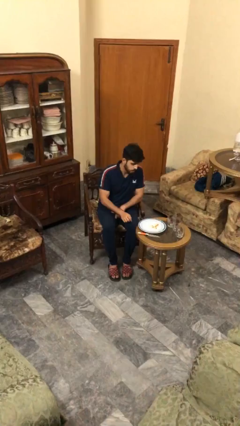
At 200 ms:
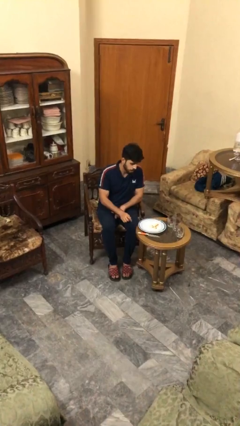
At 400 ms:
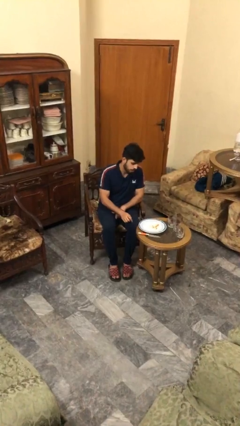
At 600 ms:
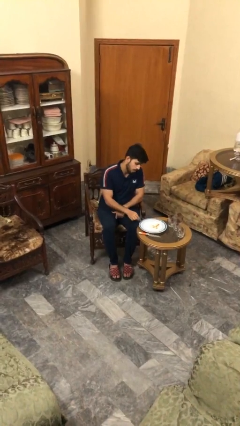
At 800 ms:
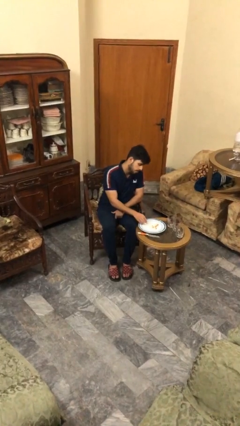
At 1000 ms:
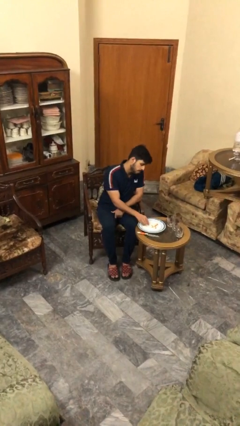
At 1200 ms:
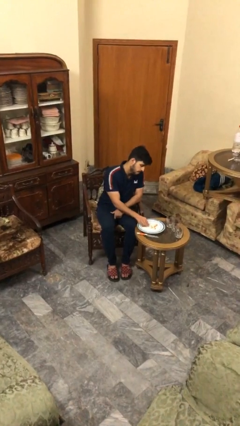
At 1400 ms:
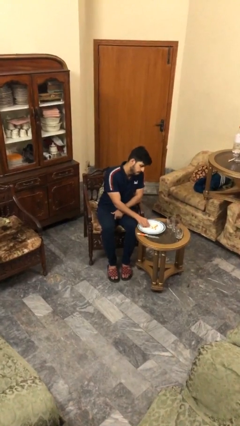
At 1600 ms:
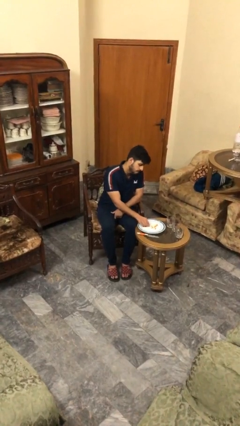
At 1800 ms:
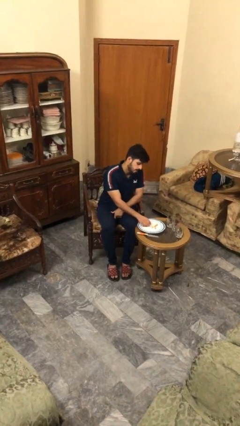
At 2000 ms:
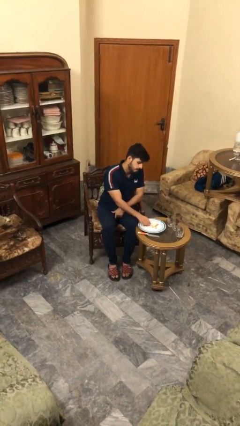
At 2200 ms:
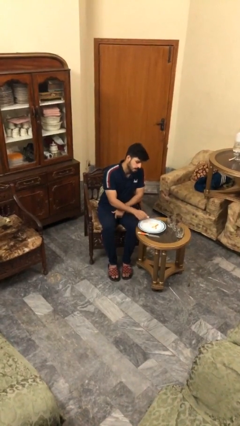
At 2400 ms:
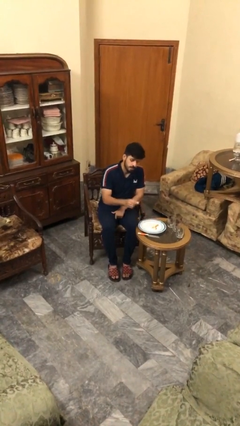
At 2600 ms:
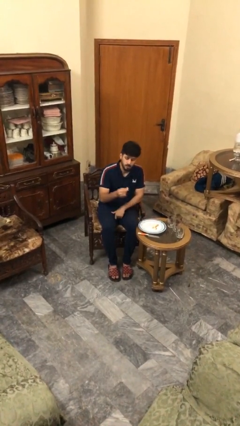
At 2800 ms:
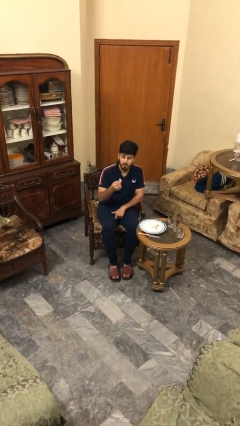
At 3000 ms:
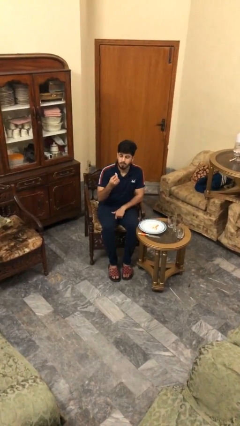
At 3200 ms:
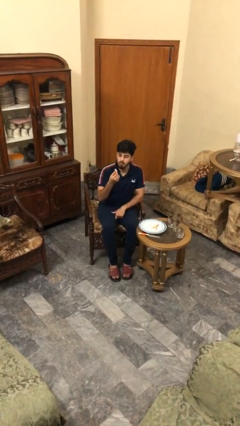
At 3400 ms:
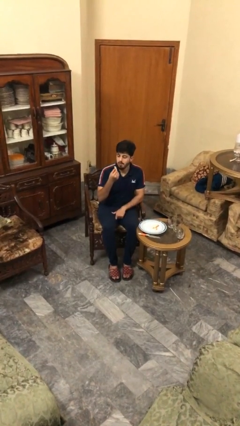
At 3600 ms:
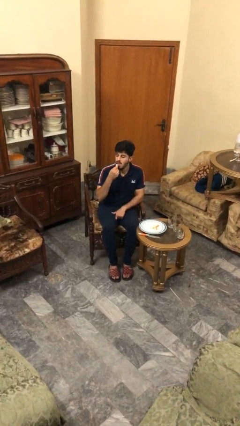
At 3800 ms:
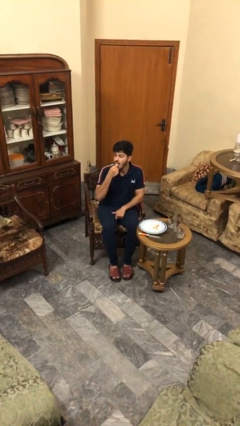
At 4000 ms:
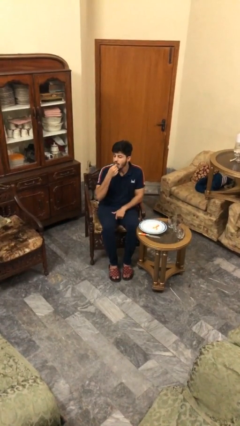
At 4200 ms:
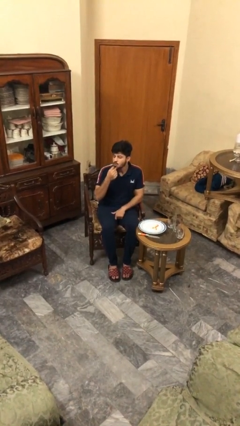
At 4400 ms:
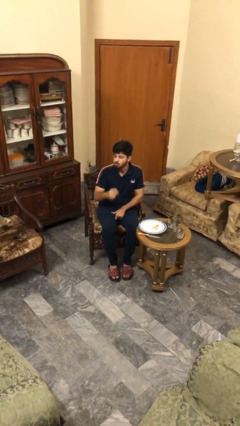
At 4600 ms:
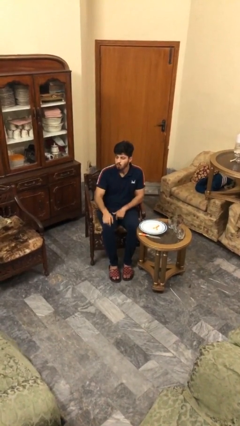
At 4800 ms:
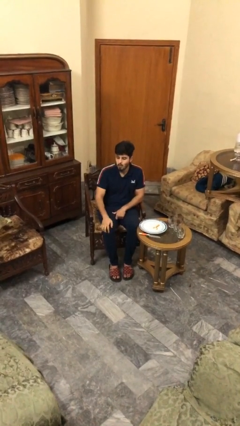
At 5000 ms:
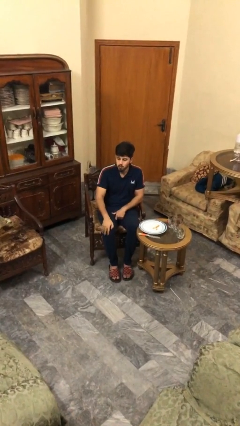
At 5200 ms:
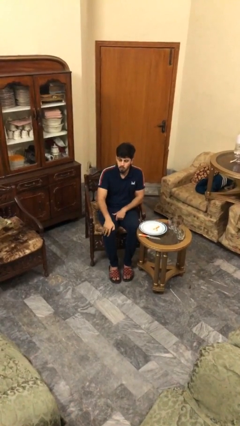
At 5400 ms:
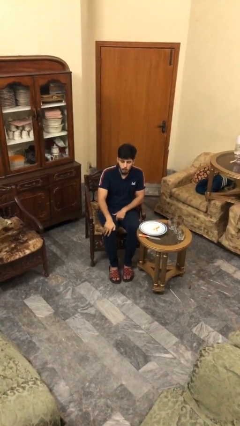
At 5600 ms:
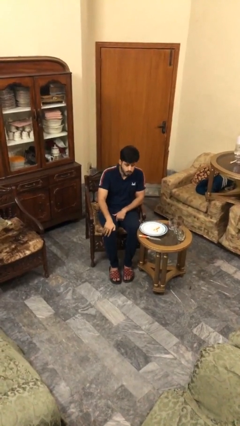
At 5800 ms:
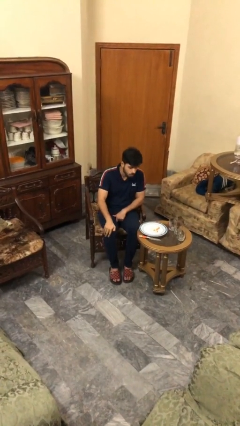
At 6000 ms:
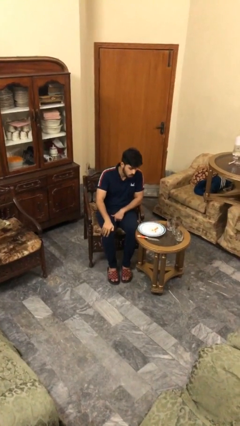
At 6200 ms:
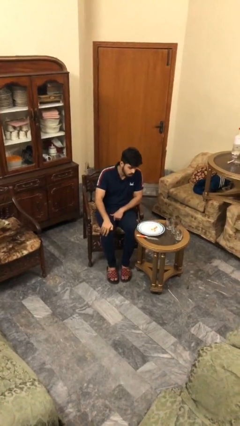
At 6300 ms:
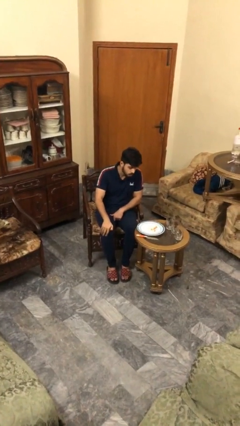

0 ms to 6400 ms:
person eats with hands

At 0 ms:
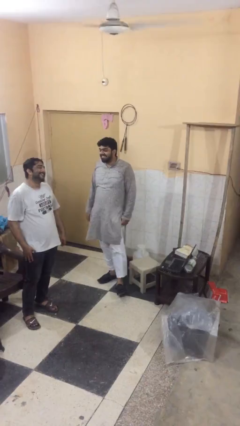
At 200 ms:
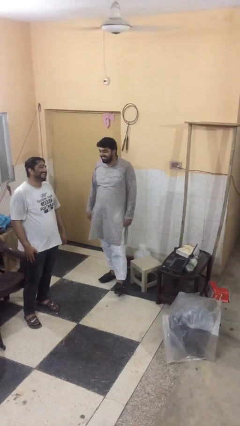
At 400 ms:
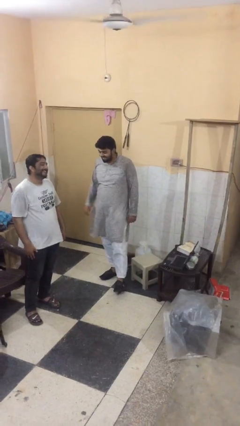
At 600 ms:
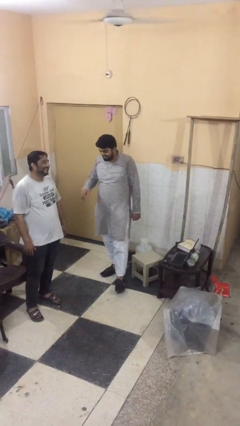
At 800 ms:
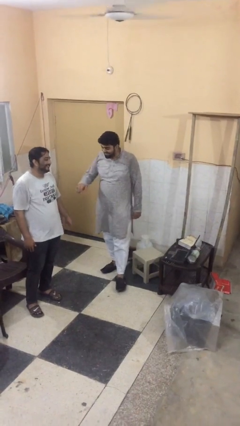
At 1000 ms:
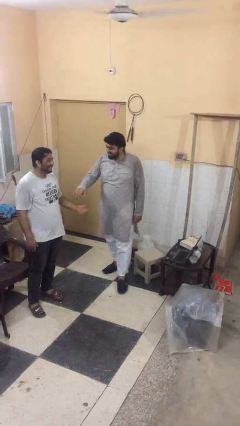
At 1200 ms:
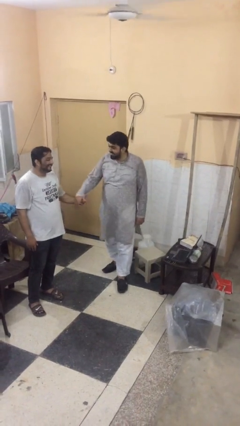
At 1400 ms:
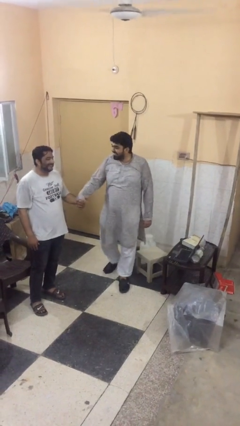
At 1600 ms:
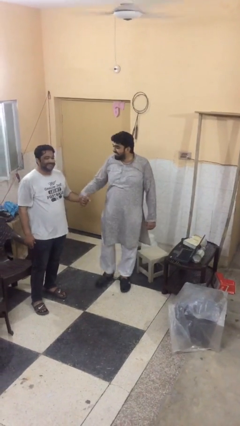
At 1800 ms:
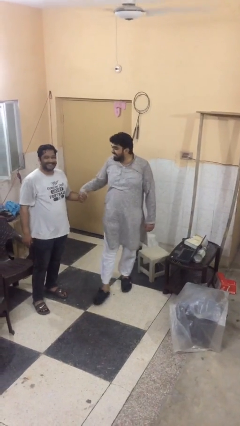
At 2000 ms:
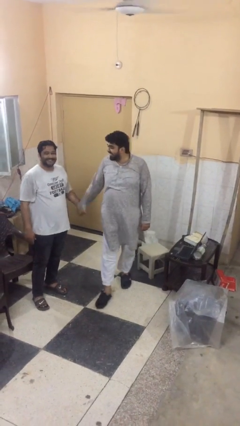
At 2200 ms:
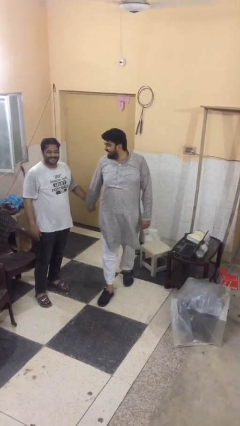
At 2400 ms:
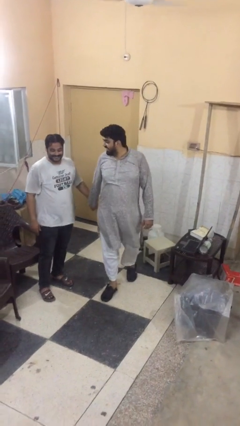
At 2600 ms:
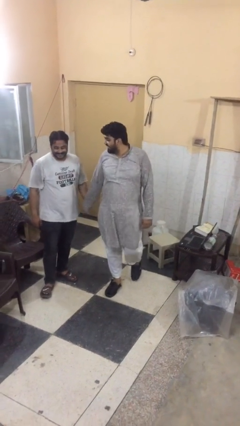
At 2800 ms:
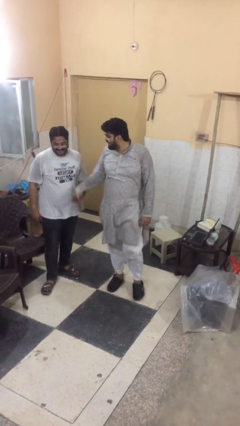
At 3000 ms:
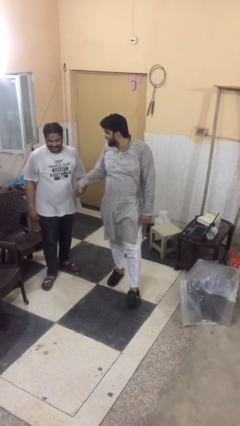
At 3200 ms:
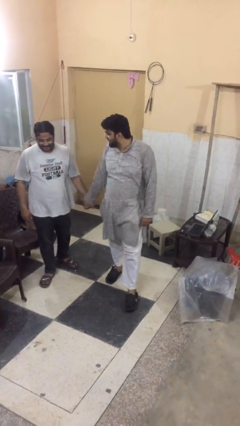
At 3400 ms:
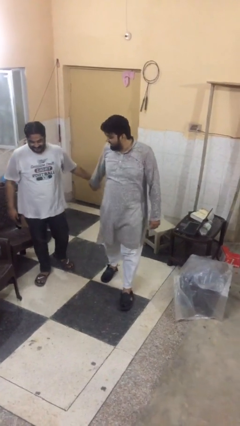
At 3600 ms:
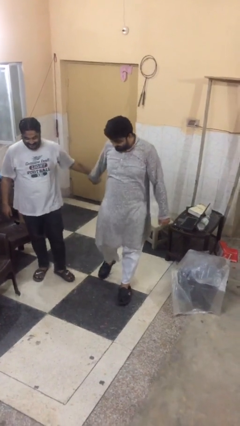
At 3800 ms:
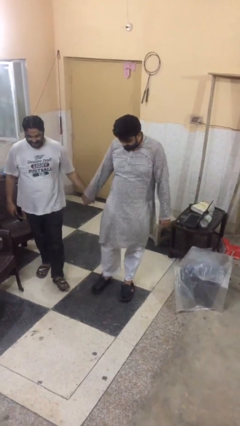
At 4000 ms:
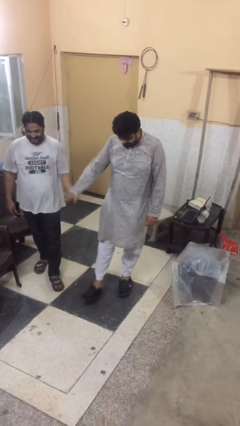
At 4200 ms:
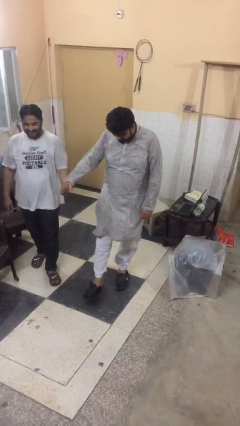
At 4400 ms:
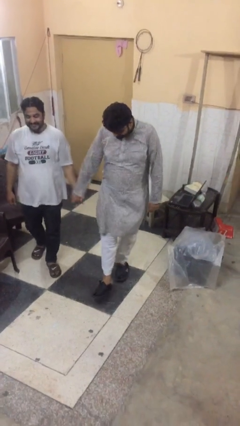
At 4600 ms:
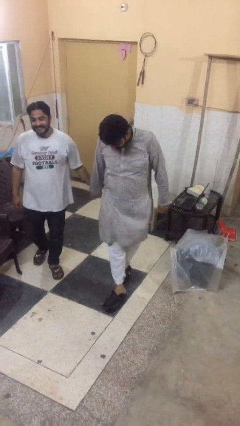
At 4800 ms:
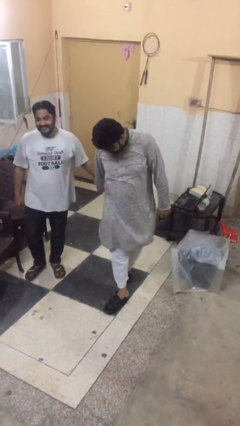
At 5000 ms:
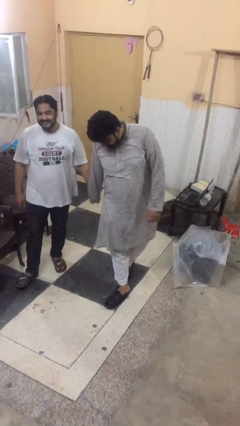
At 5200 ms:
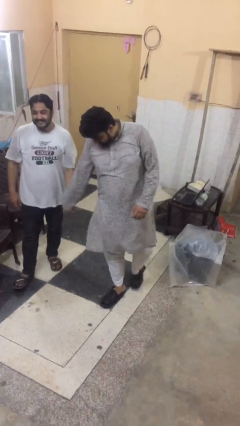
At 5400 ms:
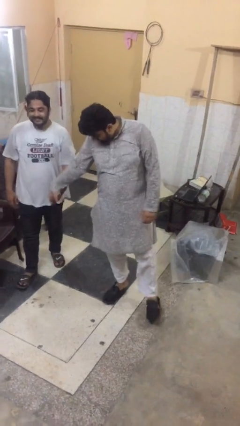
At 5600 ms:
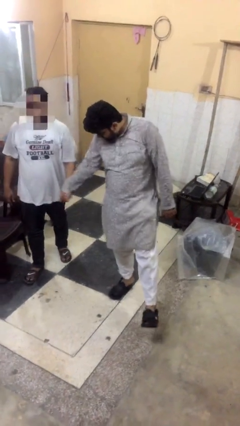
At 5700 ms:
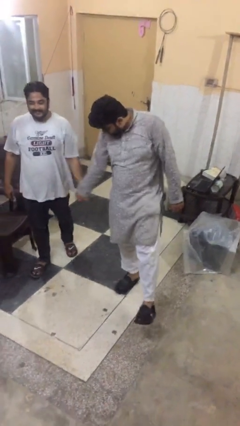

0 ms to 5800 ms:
person holds hand

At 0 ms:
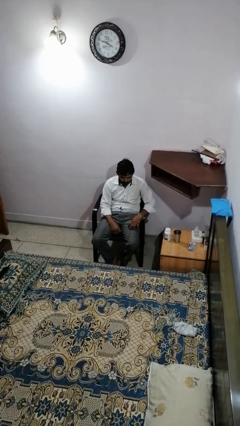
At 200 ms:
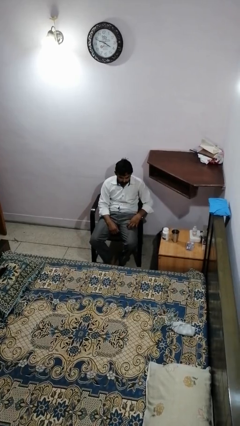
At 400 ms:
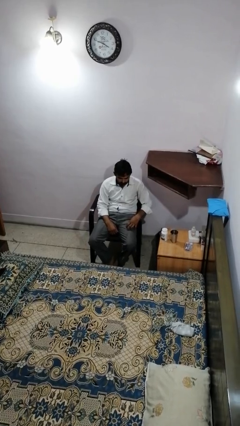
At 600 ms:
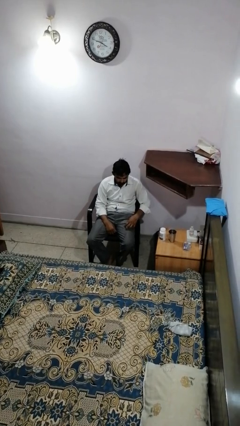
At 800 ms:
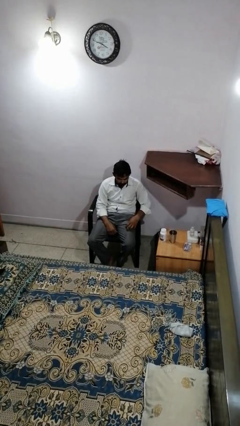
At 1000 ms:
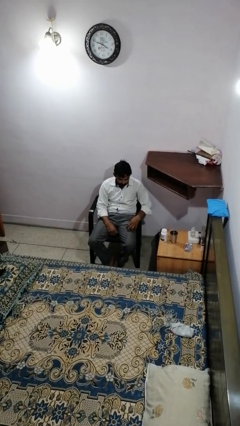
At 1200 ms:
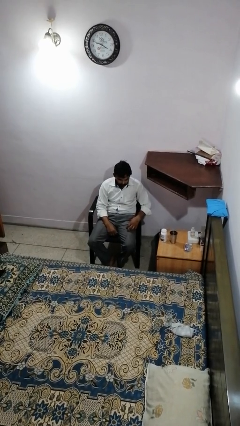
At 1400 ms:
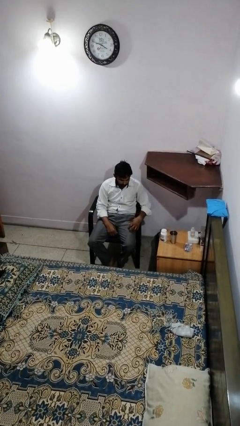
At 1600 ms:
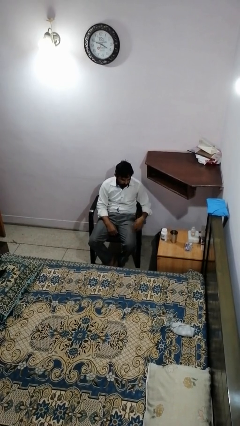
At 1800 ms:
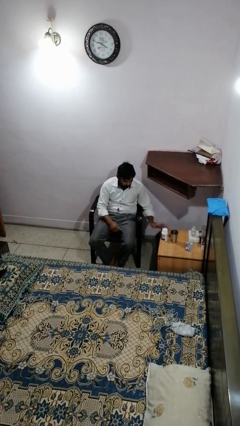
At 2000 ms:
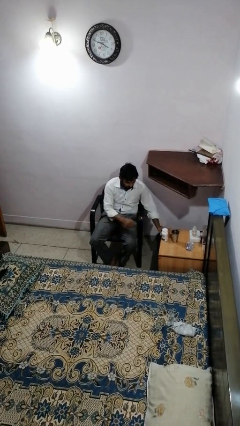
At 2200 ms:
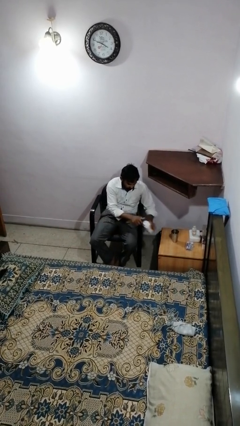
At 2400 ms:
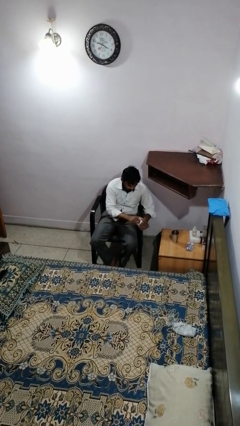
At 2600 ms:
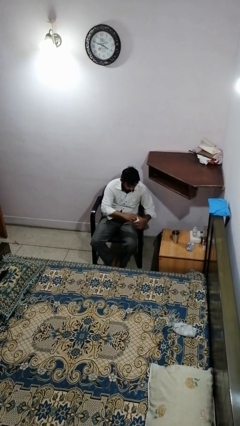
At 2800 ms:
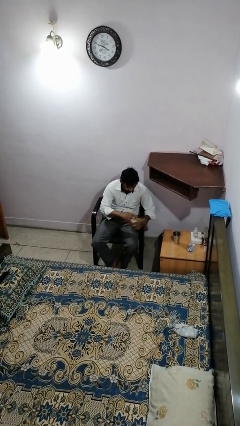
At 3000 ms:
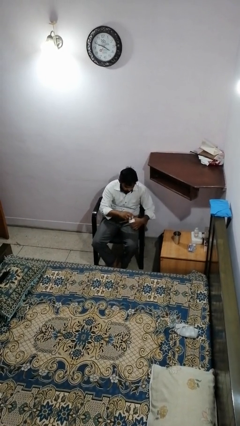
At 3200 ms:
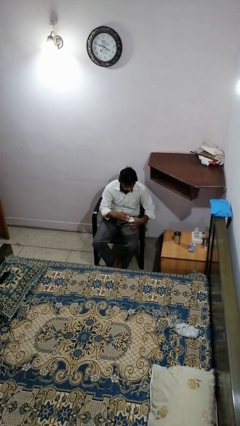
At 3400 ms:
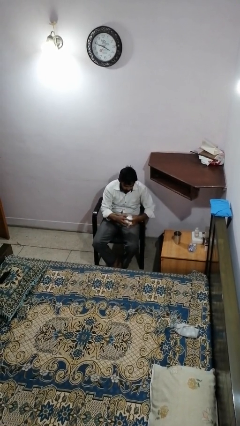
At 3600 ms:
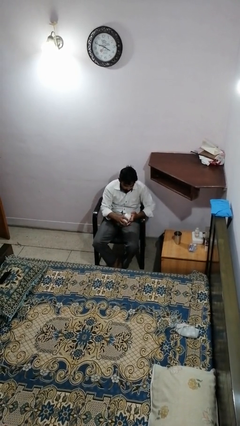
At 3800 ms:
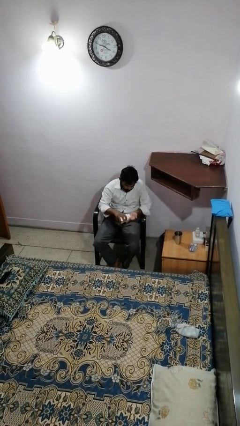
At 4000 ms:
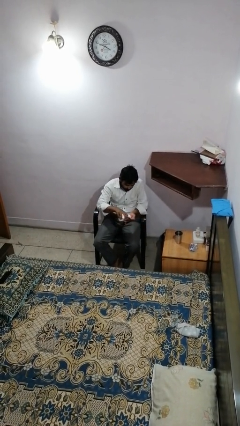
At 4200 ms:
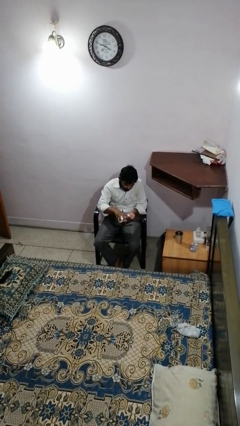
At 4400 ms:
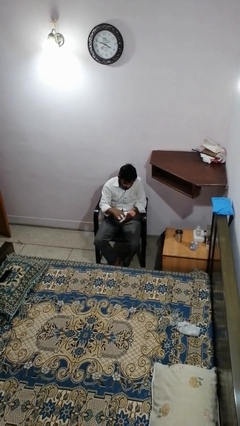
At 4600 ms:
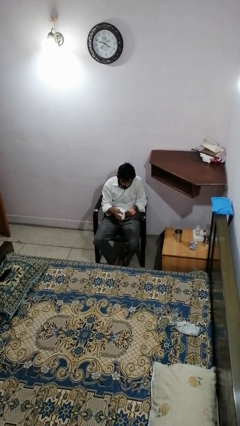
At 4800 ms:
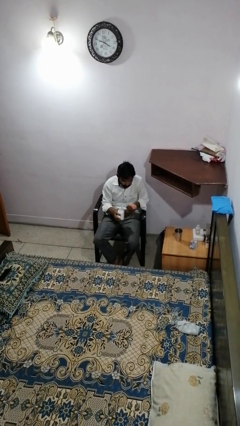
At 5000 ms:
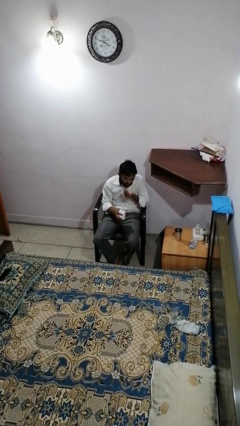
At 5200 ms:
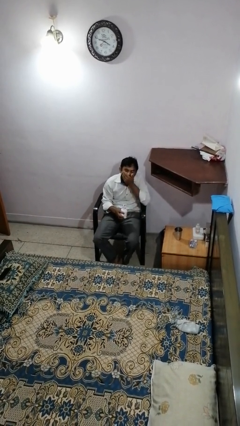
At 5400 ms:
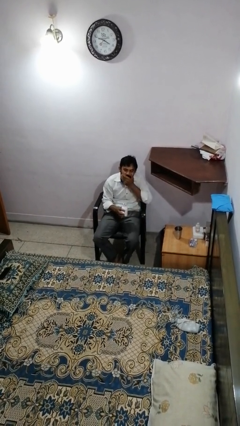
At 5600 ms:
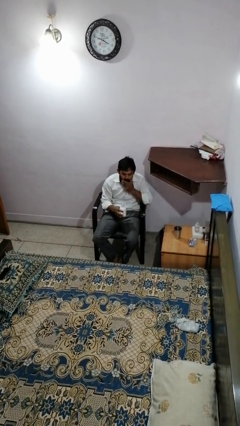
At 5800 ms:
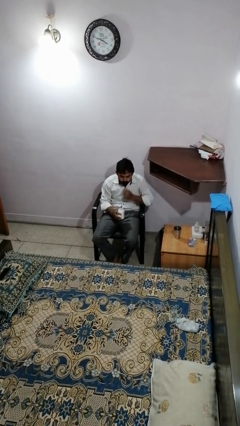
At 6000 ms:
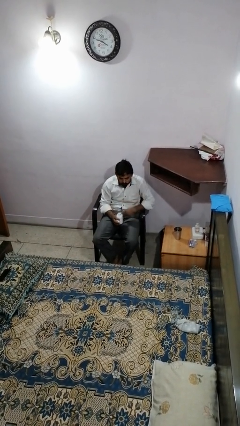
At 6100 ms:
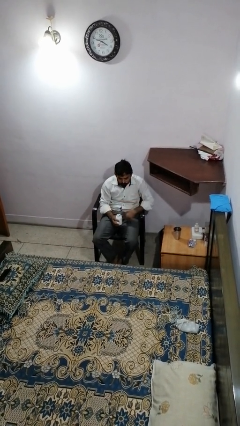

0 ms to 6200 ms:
person takes medicine pills
